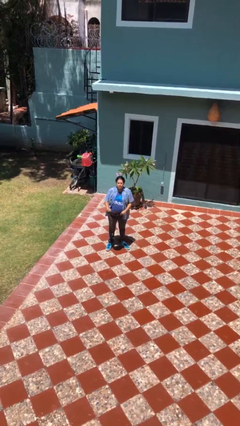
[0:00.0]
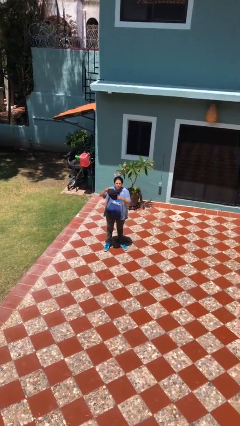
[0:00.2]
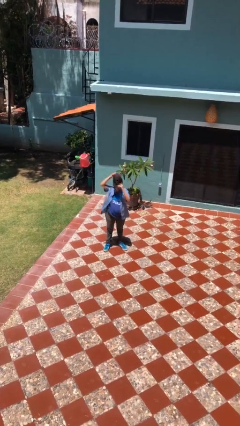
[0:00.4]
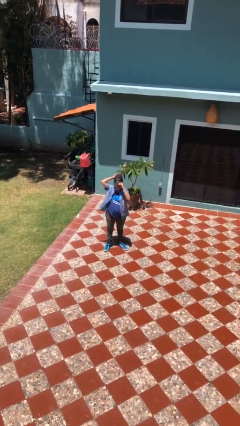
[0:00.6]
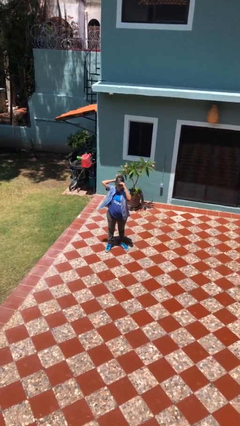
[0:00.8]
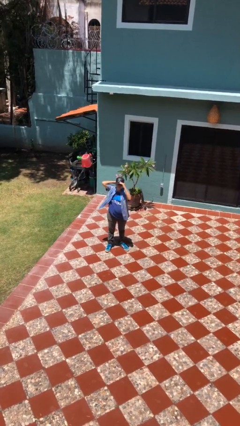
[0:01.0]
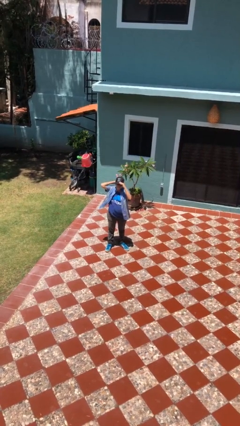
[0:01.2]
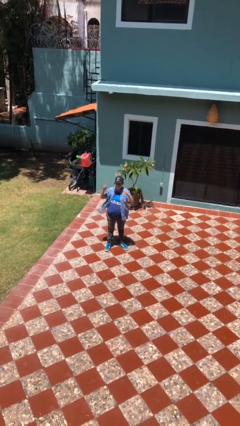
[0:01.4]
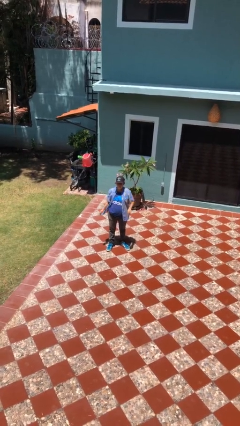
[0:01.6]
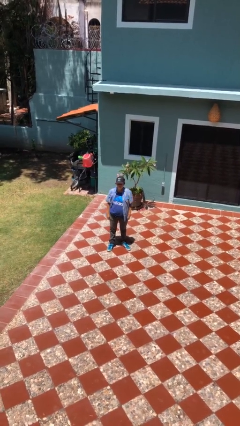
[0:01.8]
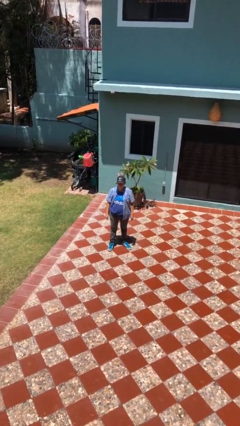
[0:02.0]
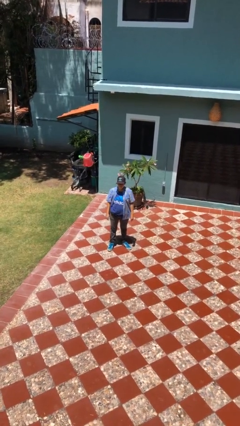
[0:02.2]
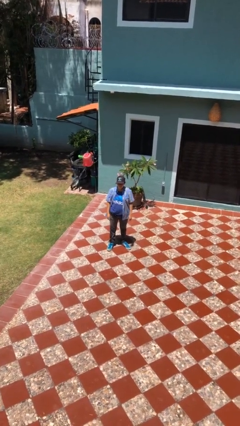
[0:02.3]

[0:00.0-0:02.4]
person puts on hat

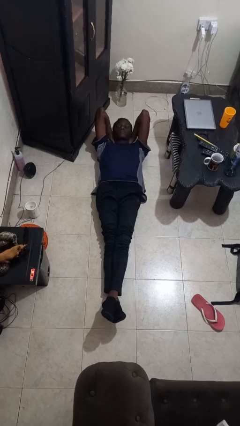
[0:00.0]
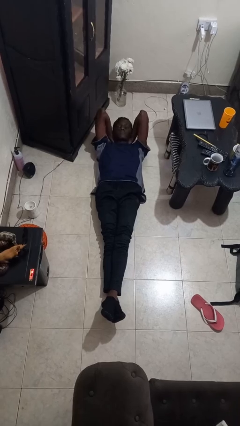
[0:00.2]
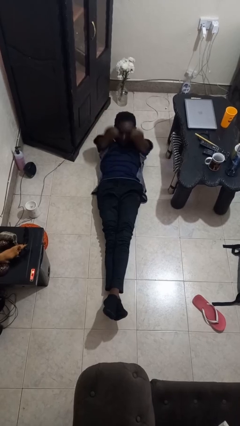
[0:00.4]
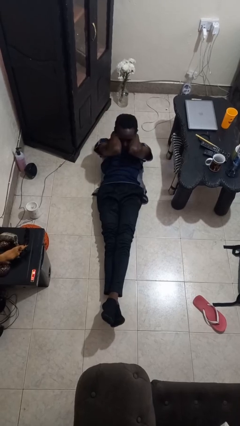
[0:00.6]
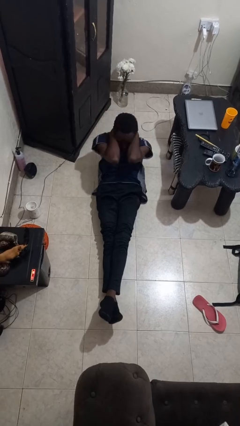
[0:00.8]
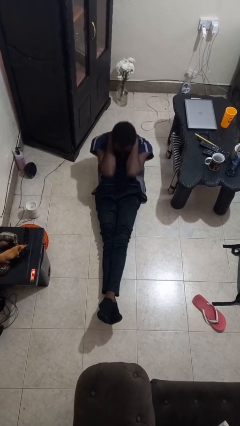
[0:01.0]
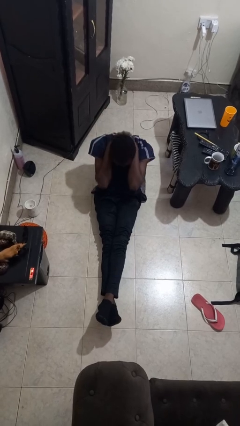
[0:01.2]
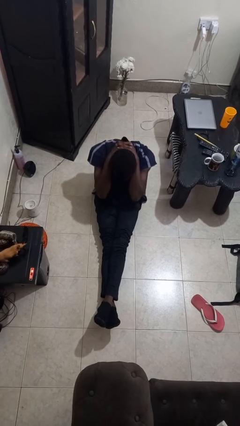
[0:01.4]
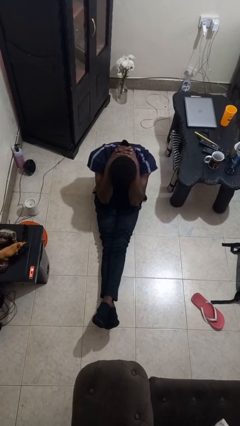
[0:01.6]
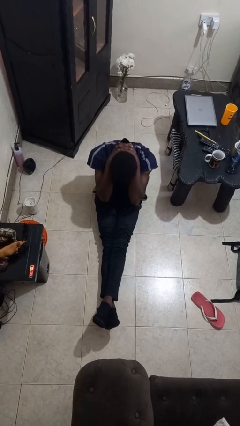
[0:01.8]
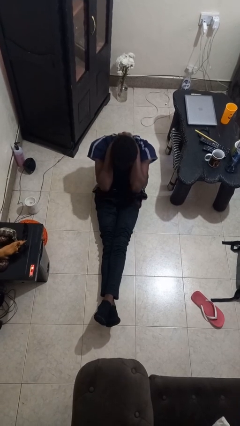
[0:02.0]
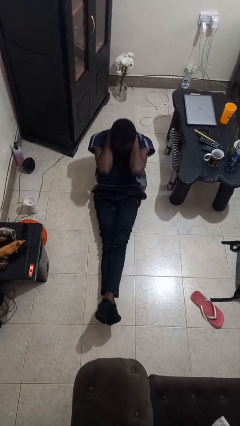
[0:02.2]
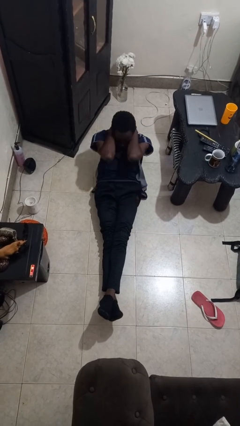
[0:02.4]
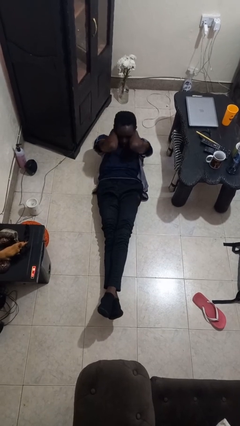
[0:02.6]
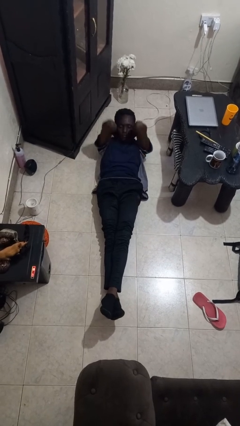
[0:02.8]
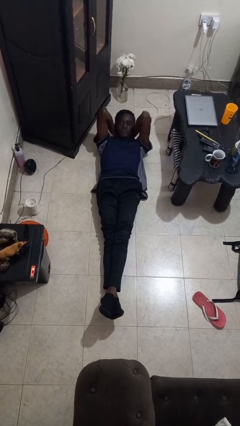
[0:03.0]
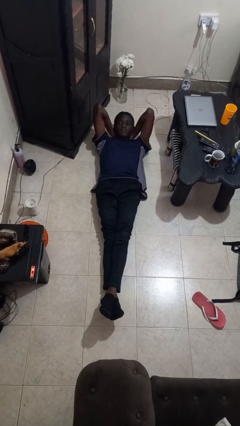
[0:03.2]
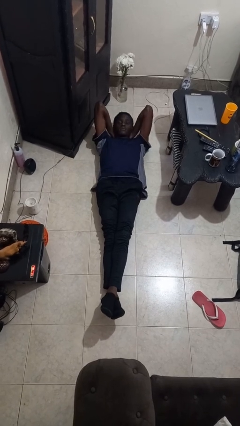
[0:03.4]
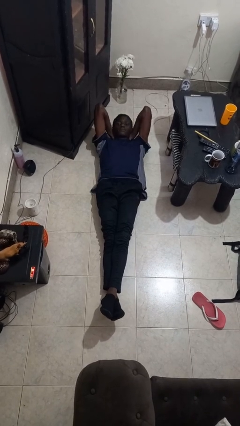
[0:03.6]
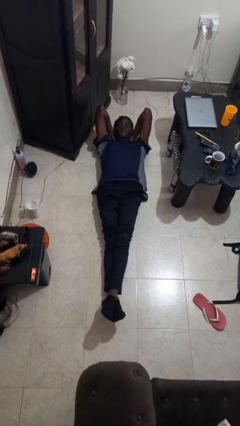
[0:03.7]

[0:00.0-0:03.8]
person exercises with situp

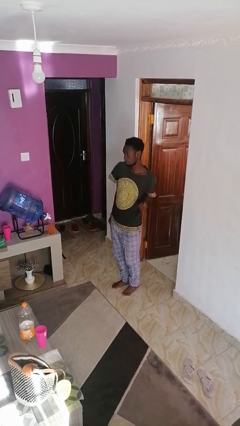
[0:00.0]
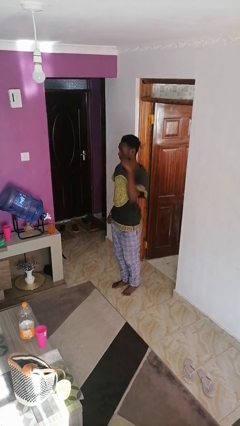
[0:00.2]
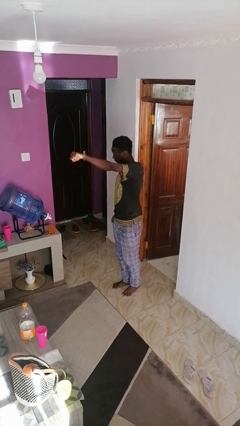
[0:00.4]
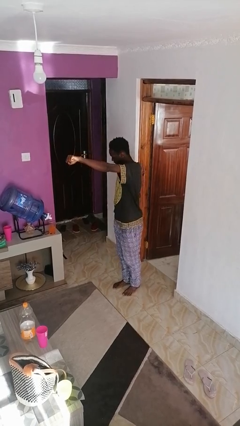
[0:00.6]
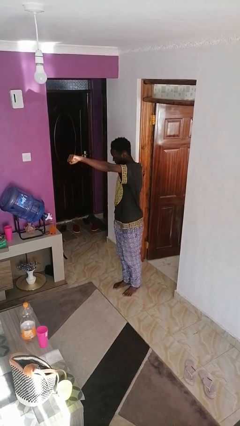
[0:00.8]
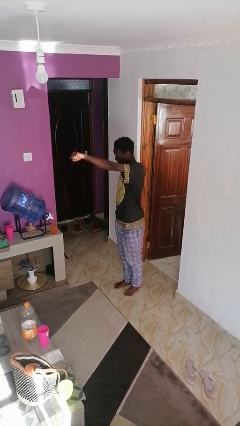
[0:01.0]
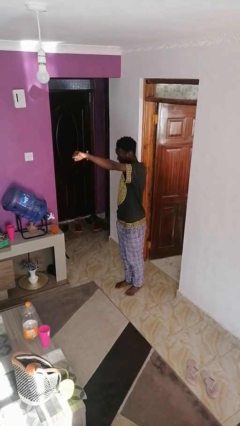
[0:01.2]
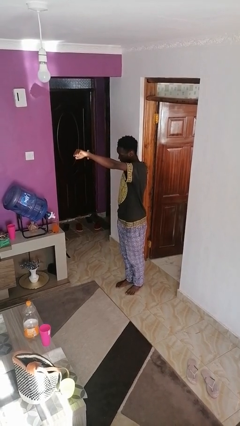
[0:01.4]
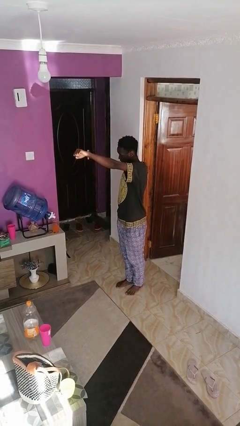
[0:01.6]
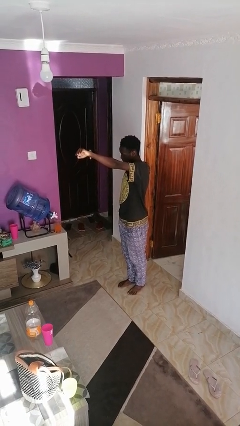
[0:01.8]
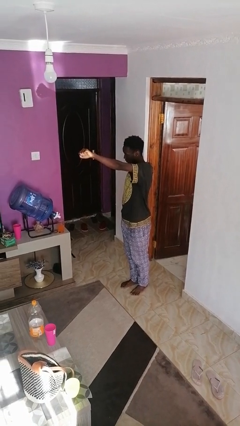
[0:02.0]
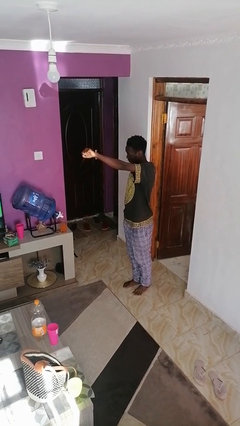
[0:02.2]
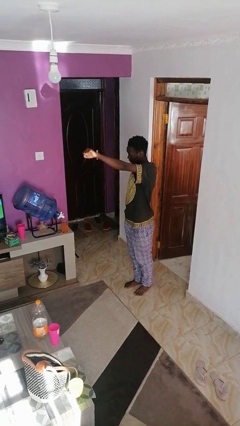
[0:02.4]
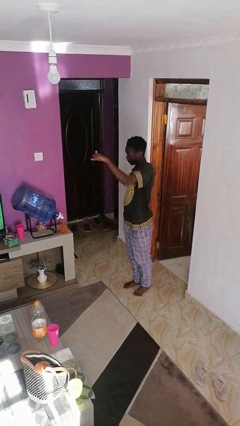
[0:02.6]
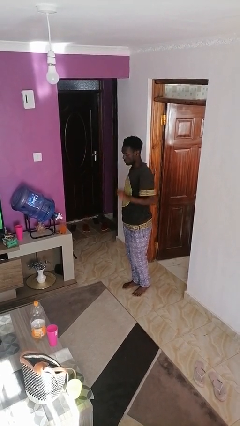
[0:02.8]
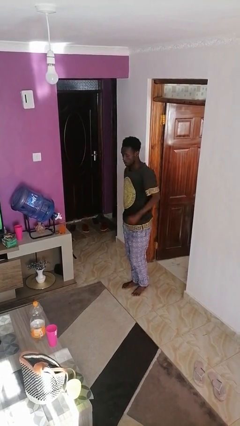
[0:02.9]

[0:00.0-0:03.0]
person punches

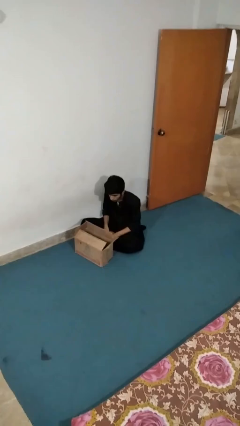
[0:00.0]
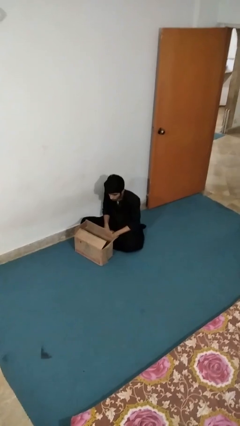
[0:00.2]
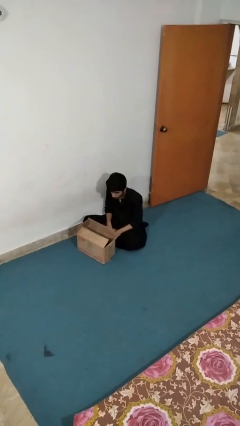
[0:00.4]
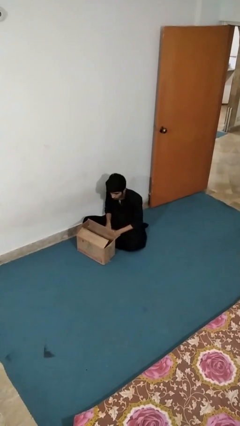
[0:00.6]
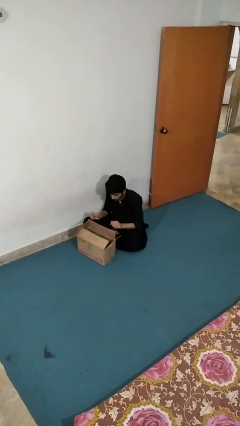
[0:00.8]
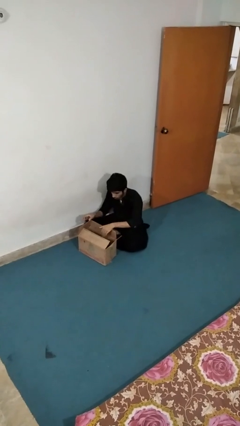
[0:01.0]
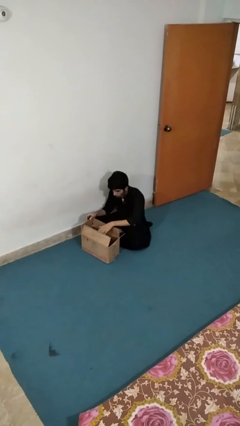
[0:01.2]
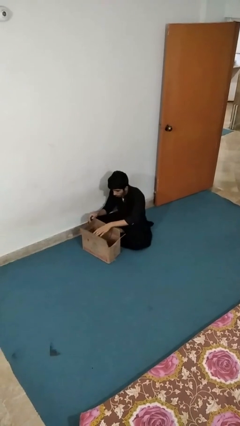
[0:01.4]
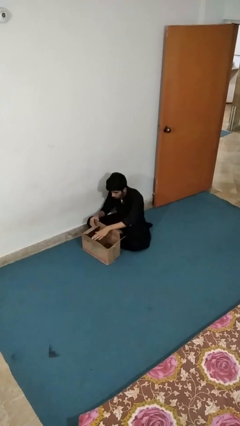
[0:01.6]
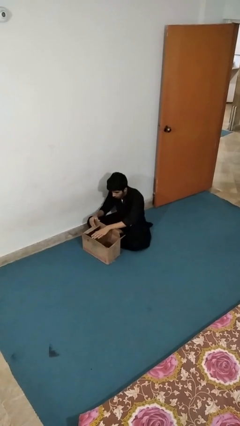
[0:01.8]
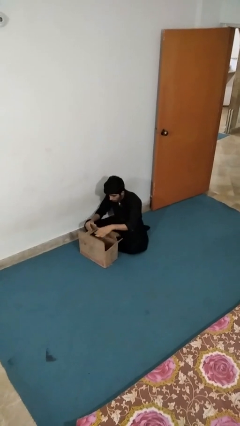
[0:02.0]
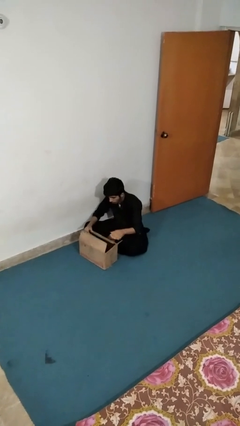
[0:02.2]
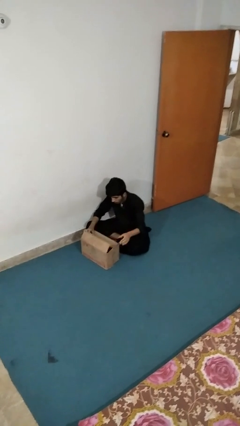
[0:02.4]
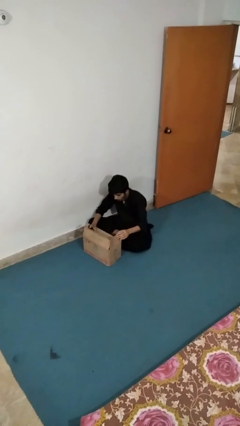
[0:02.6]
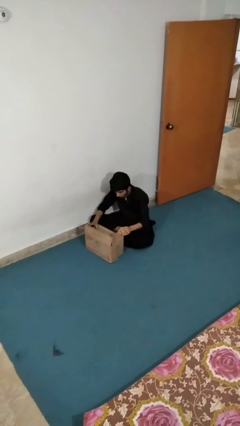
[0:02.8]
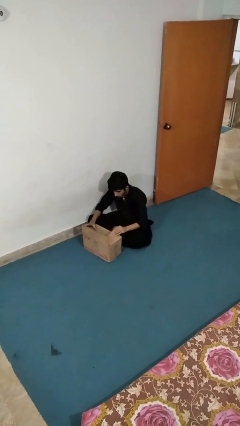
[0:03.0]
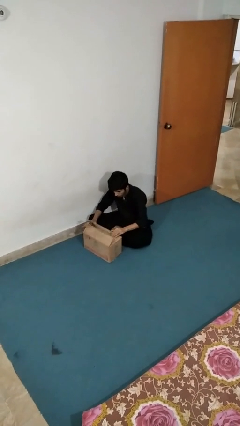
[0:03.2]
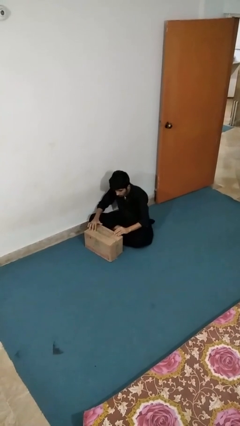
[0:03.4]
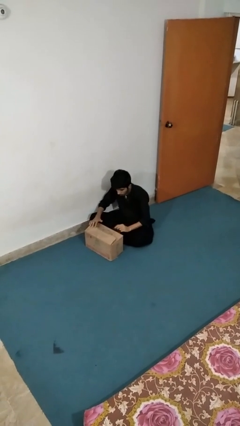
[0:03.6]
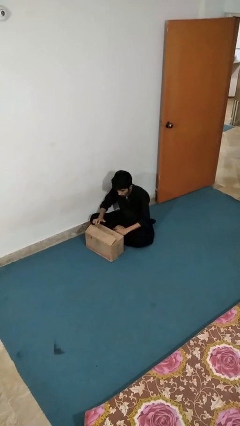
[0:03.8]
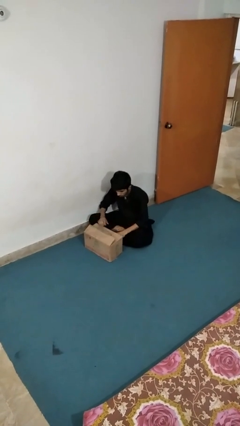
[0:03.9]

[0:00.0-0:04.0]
person closes box

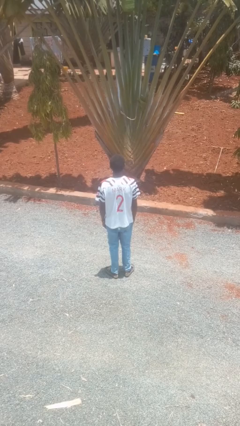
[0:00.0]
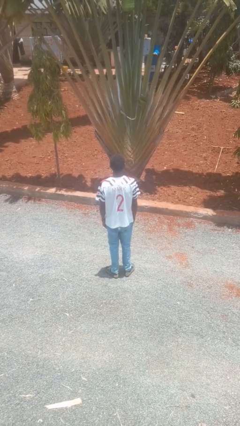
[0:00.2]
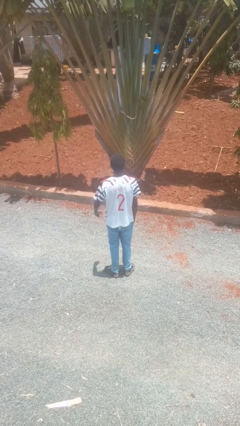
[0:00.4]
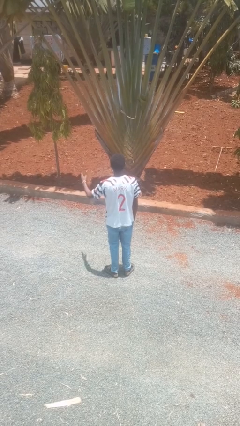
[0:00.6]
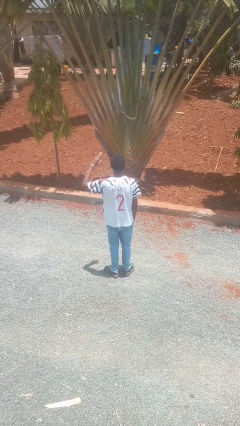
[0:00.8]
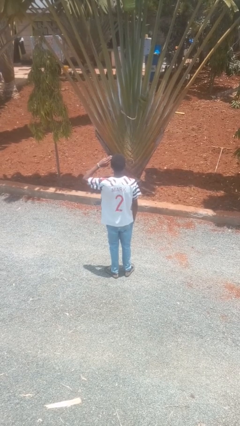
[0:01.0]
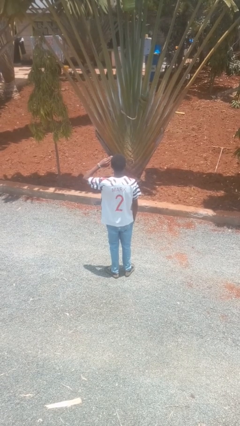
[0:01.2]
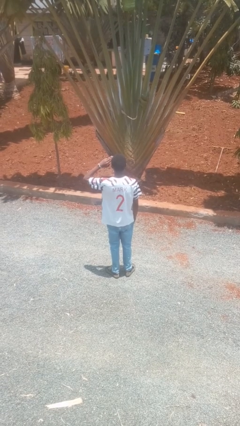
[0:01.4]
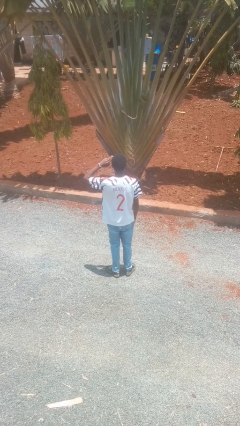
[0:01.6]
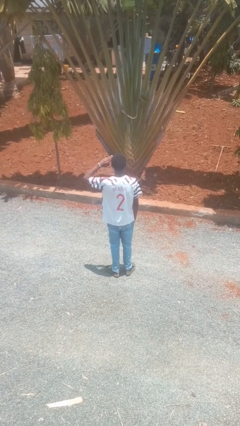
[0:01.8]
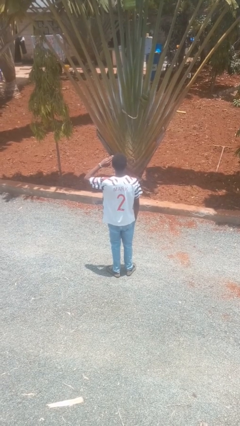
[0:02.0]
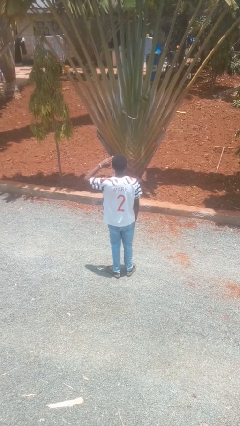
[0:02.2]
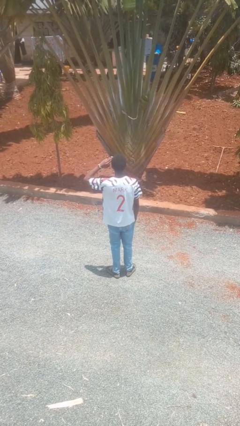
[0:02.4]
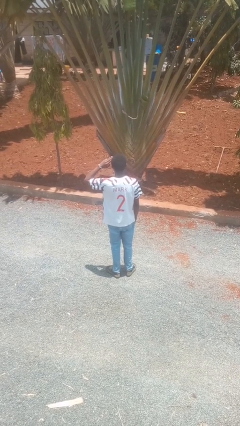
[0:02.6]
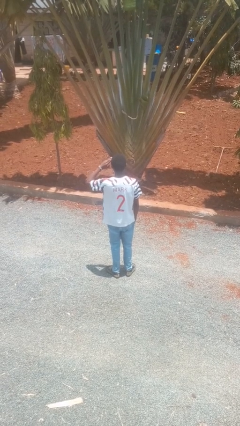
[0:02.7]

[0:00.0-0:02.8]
person salutes

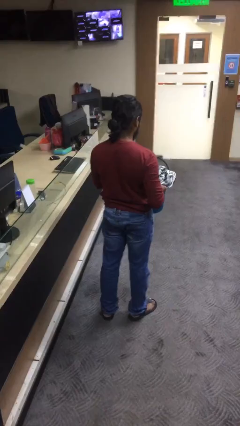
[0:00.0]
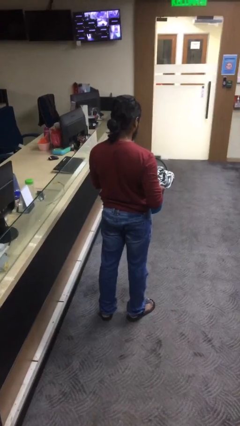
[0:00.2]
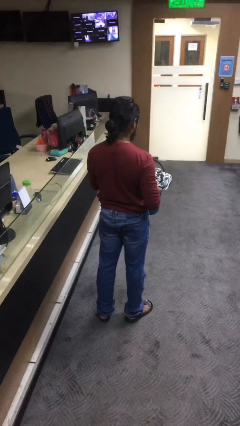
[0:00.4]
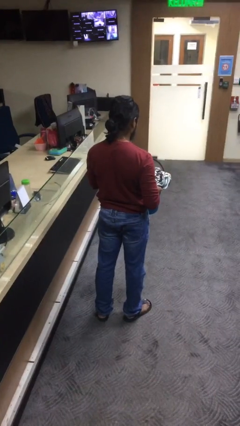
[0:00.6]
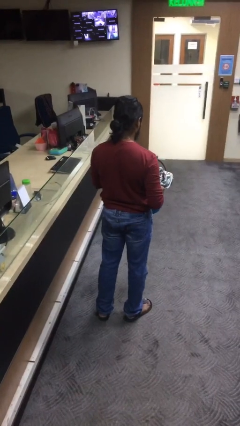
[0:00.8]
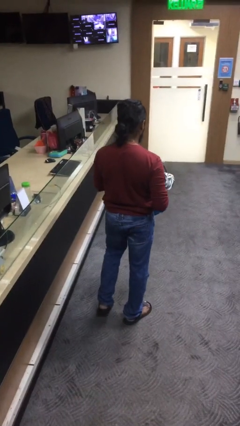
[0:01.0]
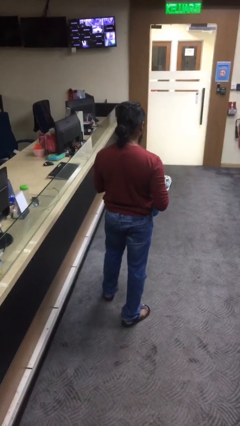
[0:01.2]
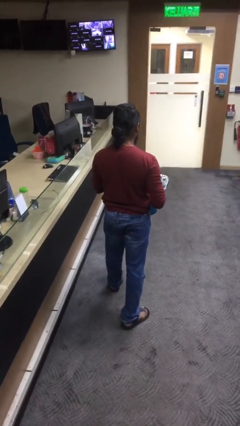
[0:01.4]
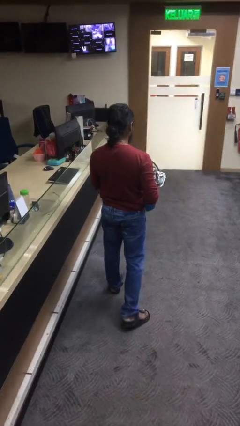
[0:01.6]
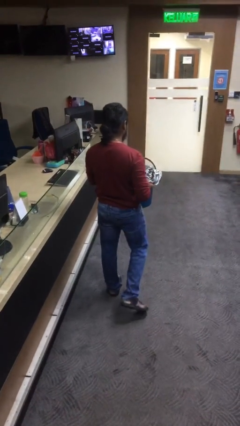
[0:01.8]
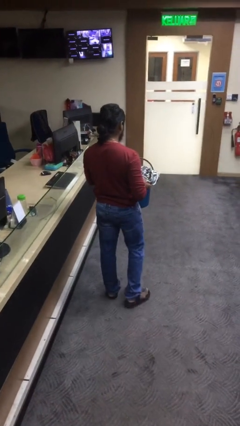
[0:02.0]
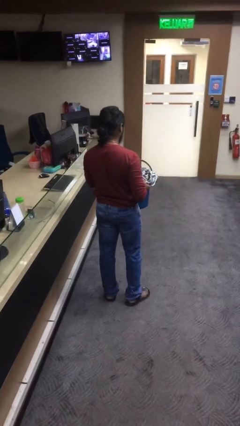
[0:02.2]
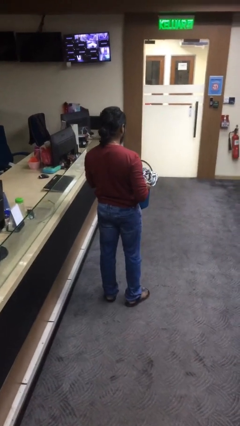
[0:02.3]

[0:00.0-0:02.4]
person carries laundry basket
